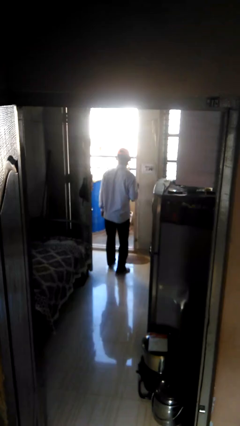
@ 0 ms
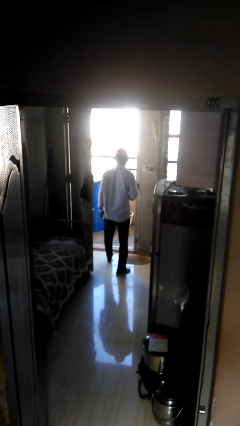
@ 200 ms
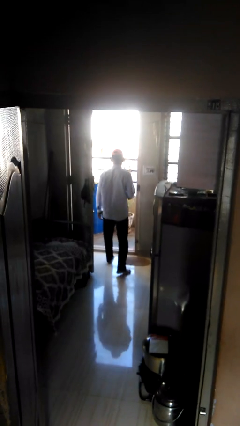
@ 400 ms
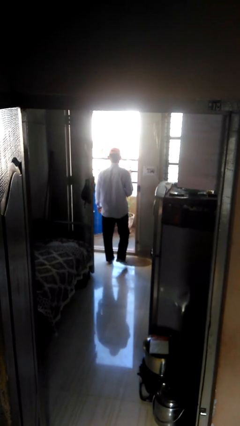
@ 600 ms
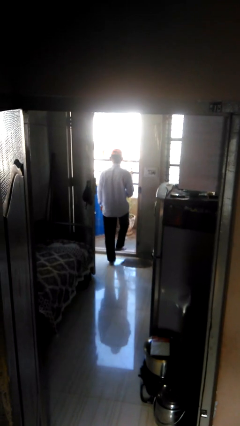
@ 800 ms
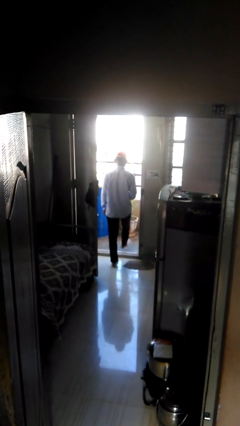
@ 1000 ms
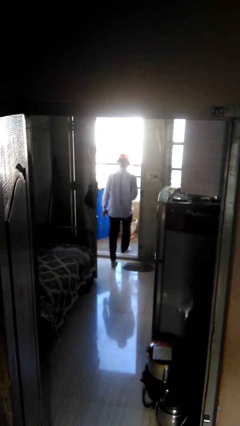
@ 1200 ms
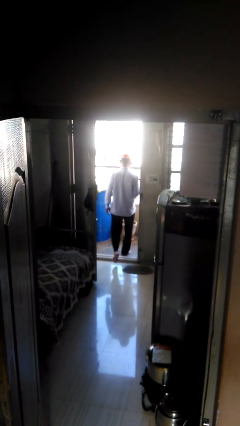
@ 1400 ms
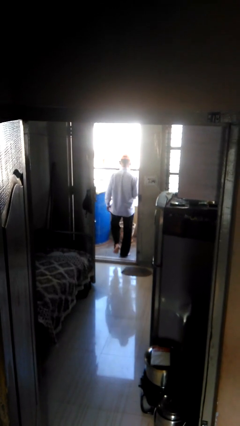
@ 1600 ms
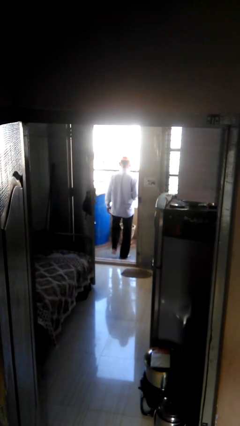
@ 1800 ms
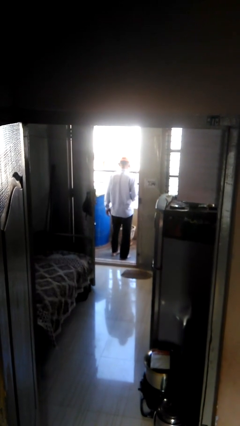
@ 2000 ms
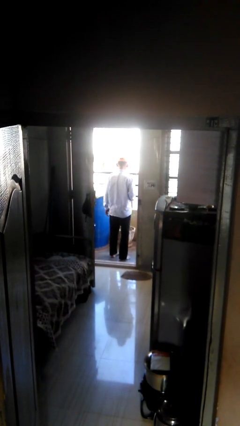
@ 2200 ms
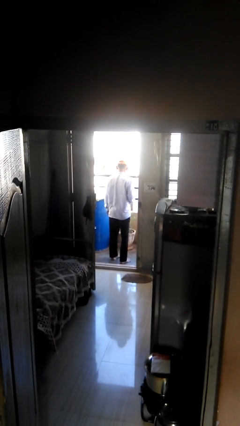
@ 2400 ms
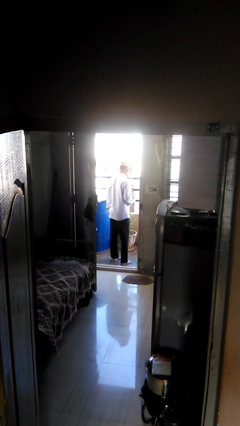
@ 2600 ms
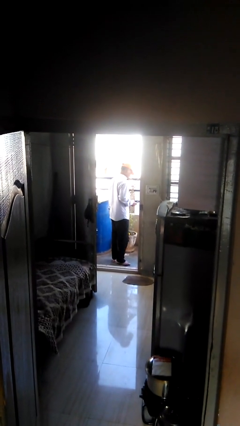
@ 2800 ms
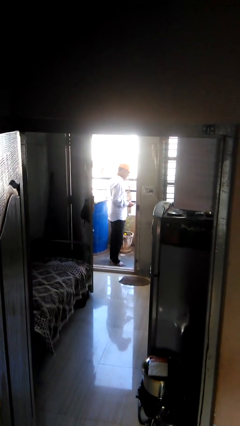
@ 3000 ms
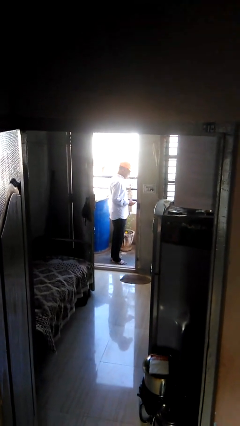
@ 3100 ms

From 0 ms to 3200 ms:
person exits scene through structure

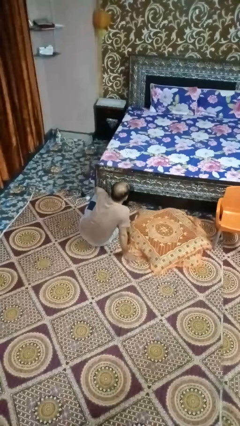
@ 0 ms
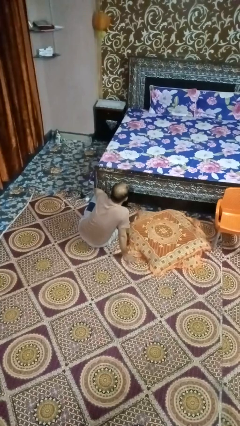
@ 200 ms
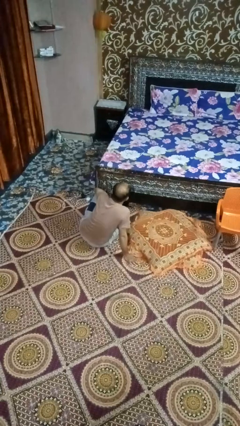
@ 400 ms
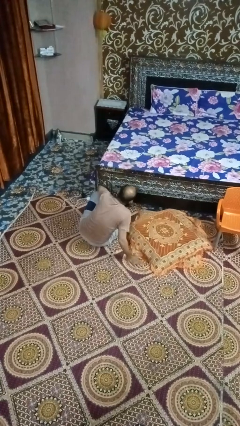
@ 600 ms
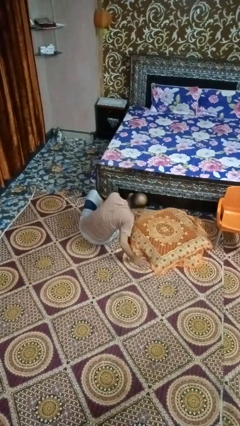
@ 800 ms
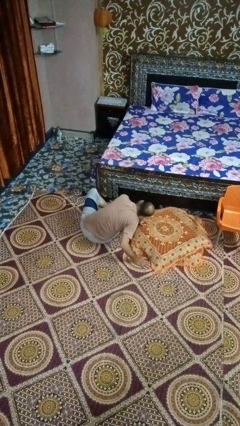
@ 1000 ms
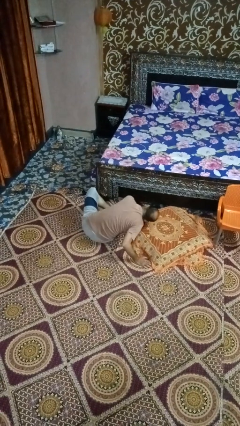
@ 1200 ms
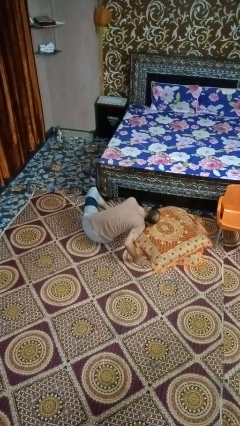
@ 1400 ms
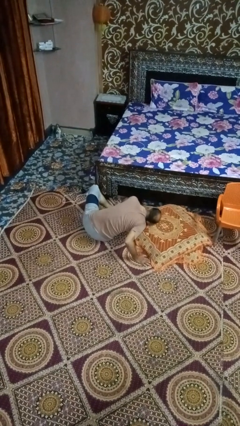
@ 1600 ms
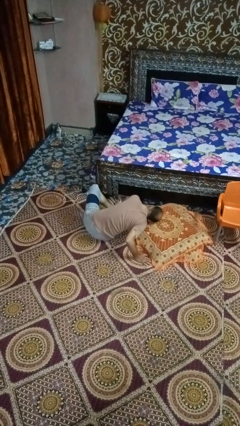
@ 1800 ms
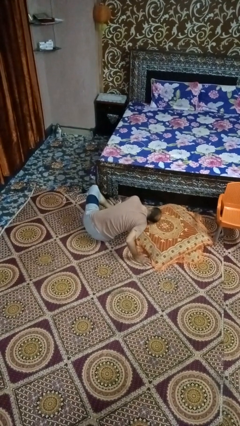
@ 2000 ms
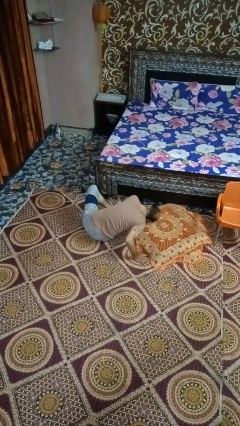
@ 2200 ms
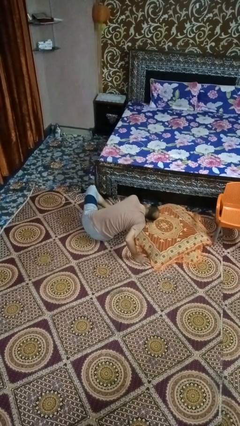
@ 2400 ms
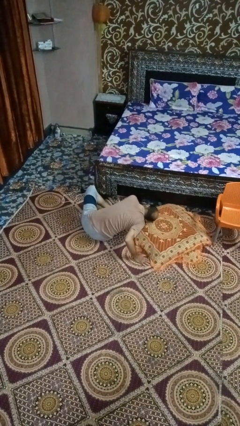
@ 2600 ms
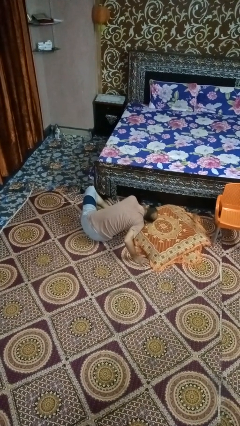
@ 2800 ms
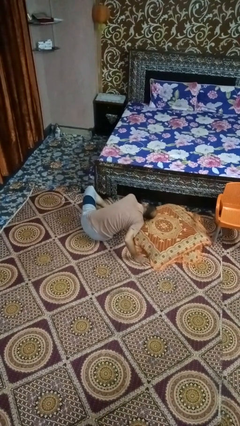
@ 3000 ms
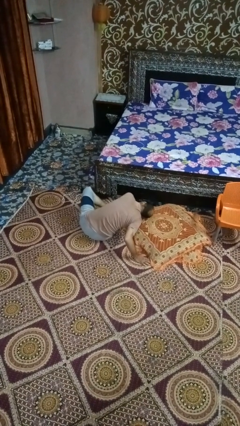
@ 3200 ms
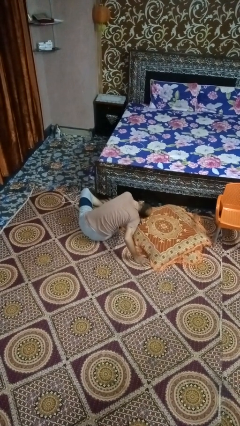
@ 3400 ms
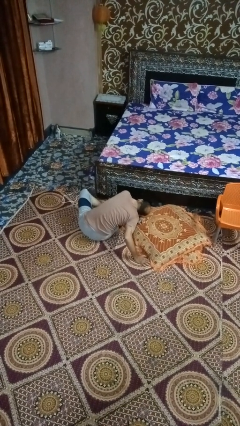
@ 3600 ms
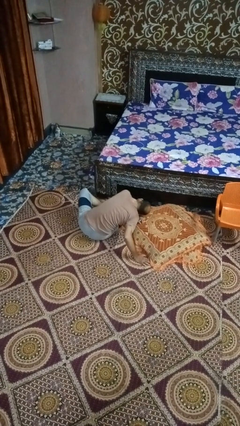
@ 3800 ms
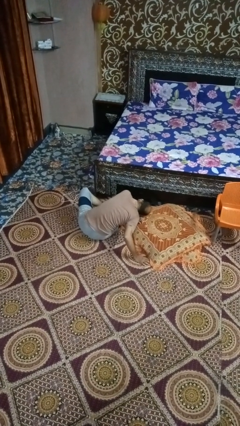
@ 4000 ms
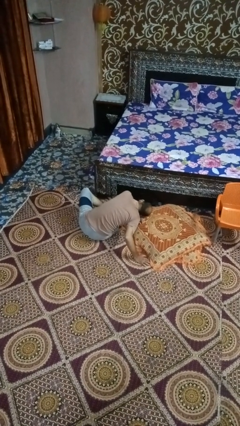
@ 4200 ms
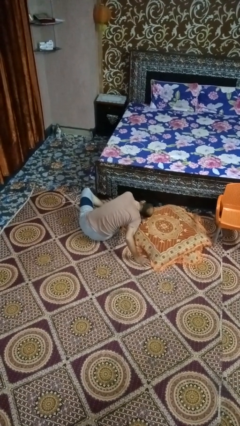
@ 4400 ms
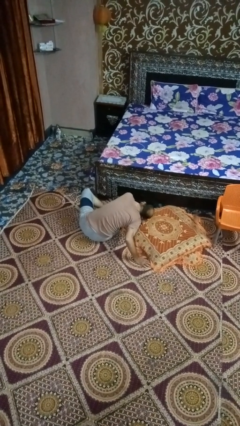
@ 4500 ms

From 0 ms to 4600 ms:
person searches under bed

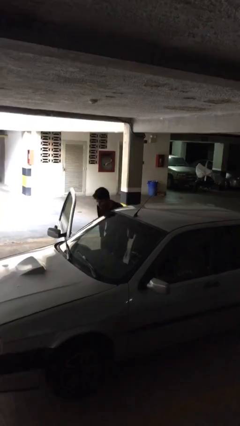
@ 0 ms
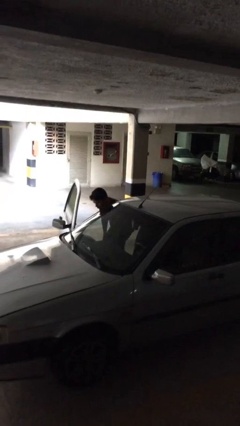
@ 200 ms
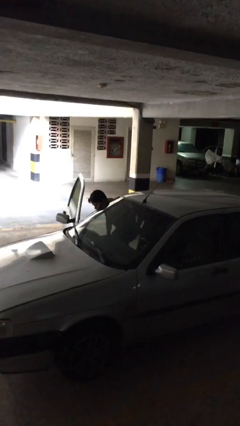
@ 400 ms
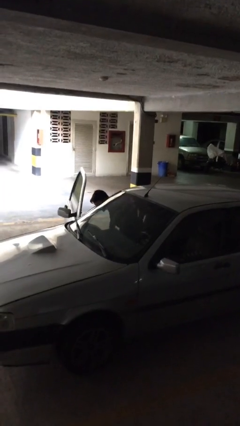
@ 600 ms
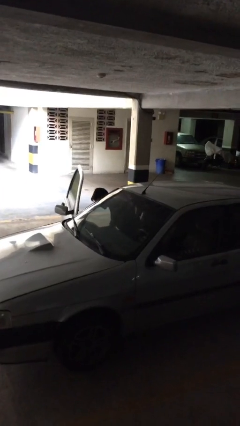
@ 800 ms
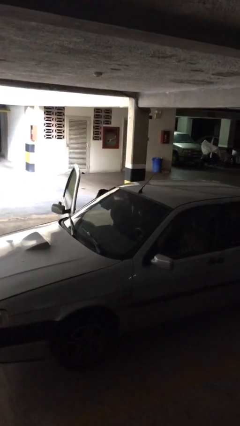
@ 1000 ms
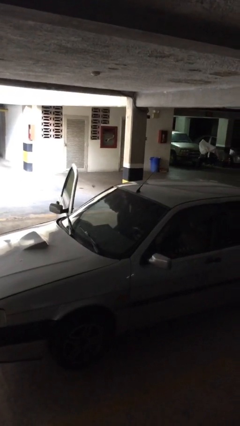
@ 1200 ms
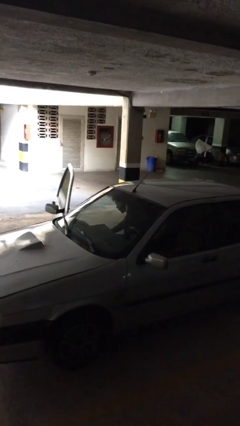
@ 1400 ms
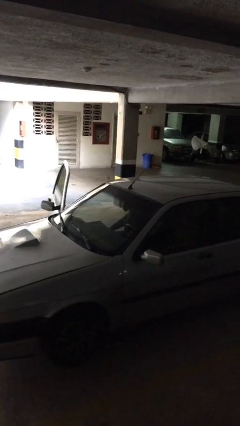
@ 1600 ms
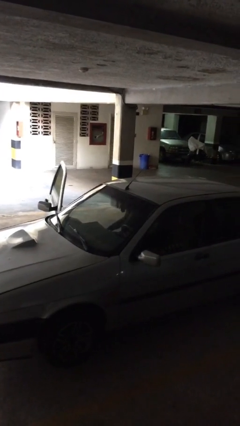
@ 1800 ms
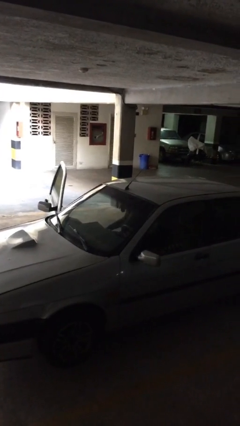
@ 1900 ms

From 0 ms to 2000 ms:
person enters car

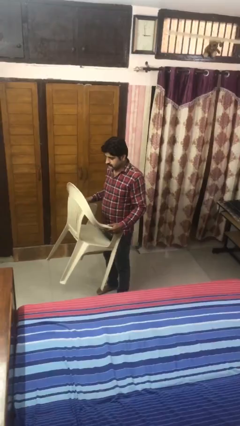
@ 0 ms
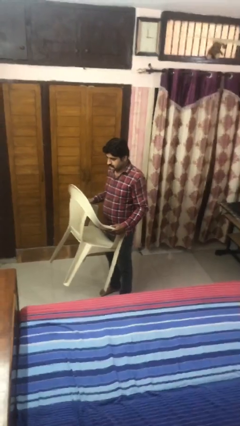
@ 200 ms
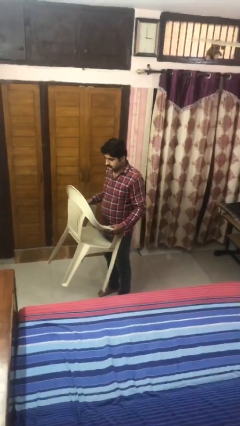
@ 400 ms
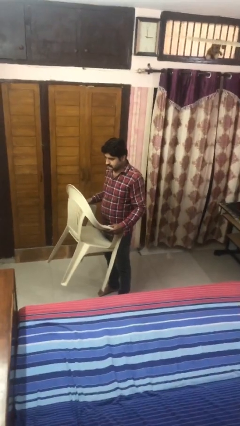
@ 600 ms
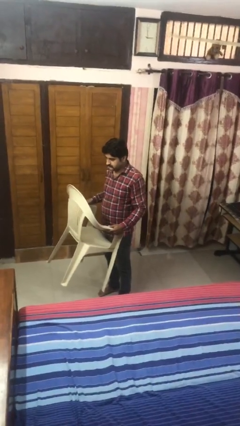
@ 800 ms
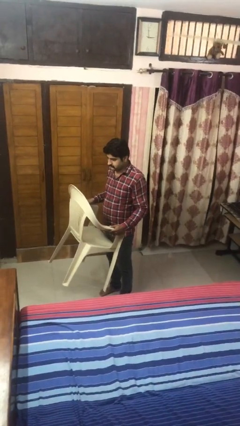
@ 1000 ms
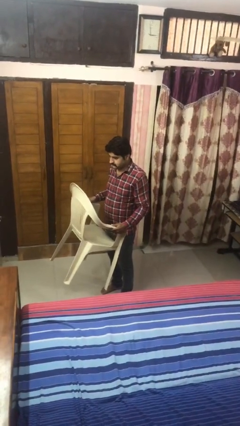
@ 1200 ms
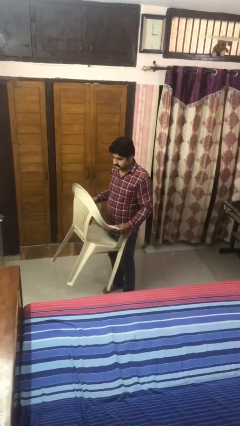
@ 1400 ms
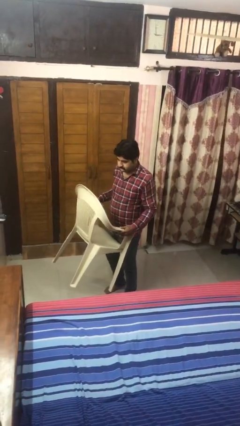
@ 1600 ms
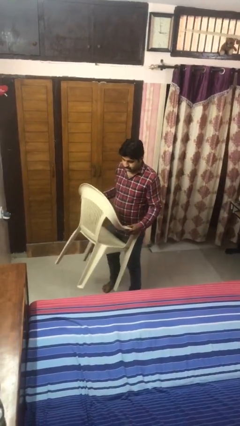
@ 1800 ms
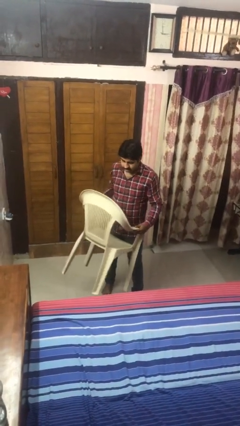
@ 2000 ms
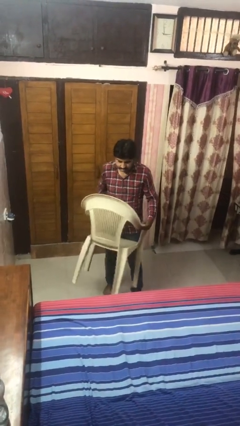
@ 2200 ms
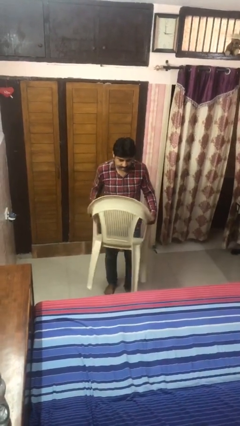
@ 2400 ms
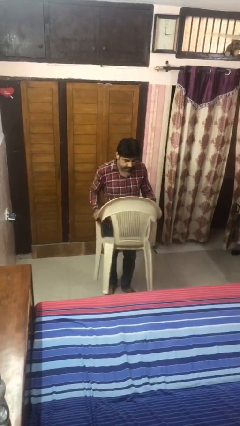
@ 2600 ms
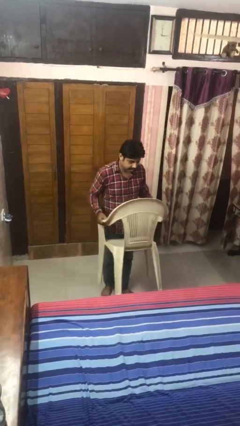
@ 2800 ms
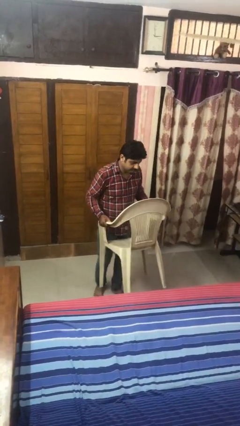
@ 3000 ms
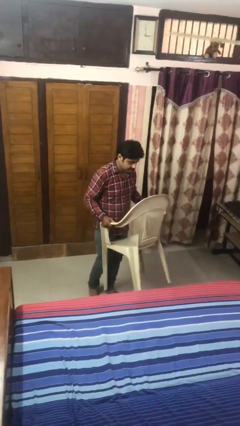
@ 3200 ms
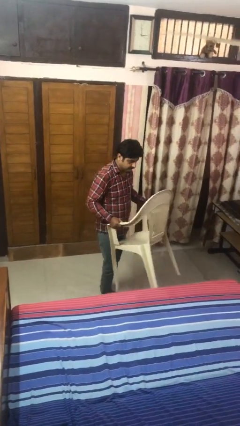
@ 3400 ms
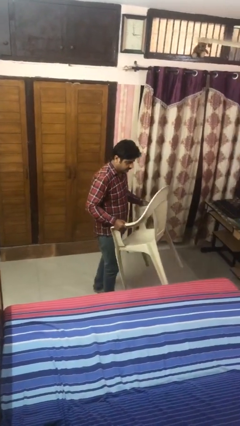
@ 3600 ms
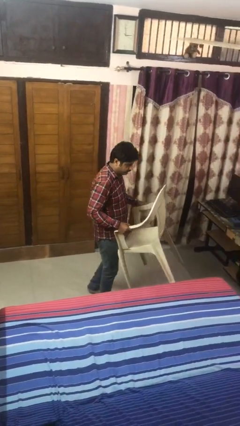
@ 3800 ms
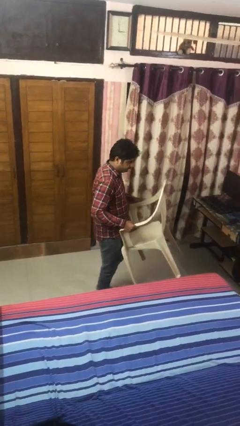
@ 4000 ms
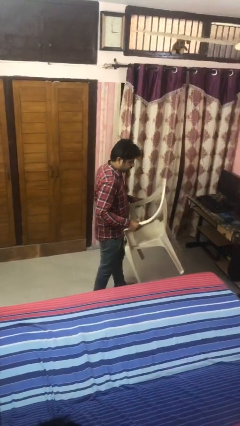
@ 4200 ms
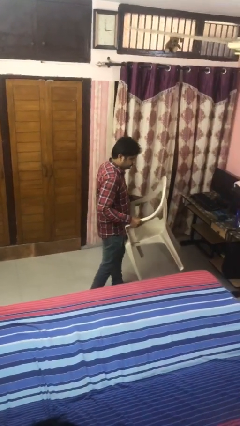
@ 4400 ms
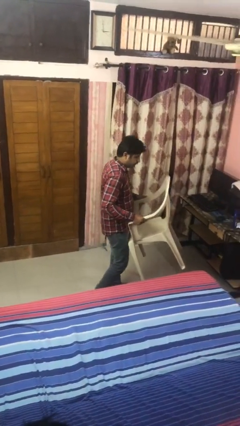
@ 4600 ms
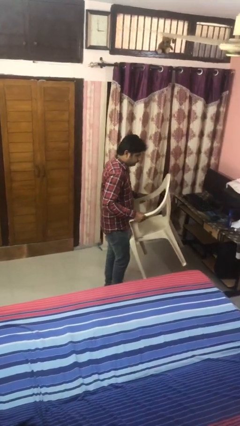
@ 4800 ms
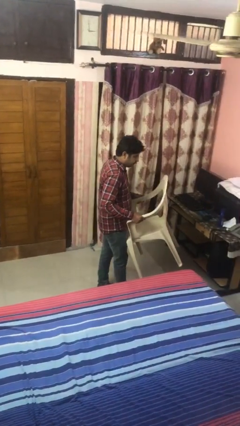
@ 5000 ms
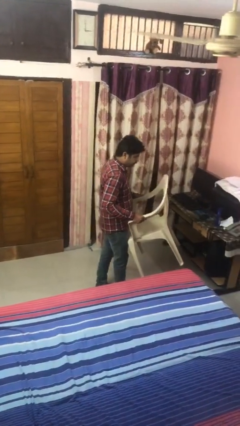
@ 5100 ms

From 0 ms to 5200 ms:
person carries furniture

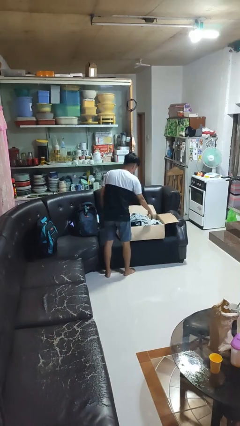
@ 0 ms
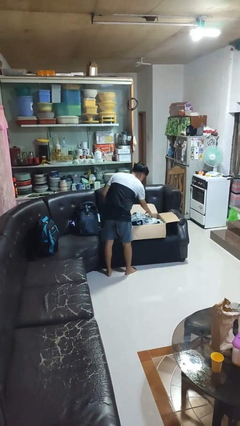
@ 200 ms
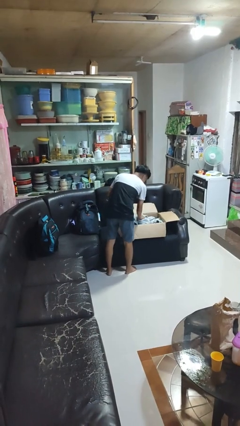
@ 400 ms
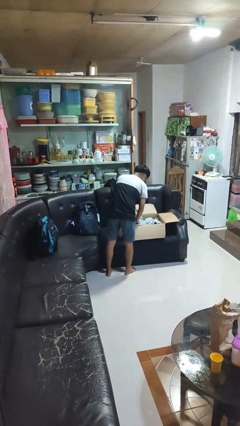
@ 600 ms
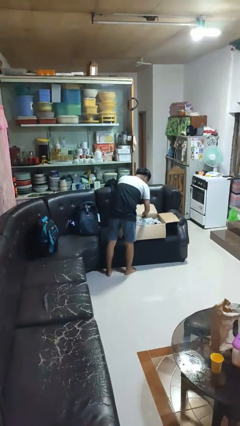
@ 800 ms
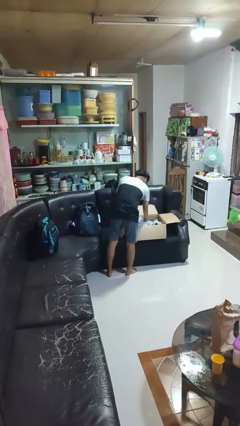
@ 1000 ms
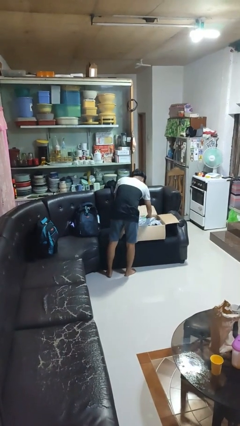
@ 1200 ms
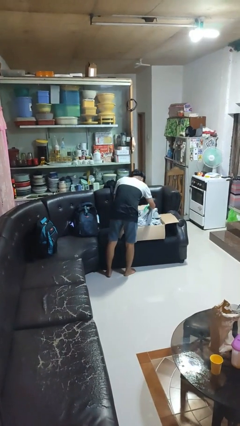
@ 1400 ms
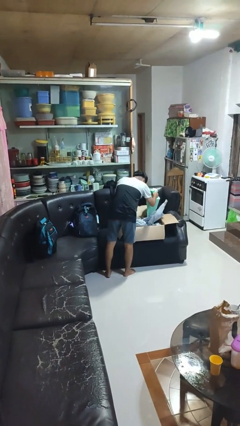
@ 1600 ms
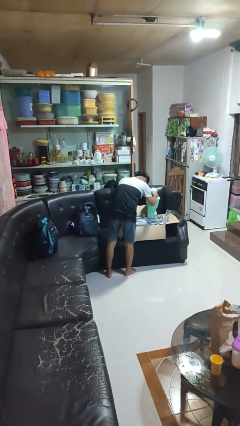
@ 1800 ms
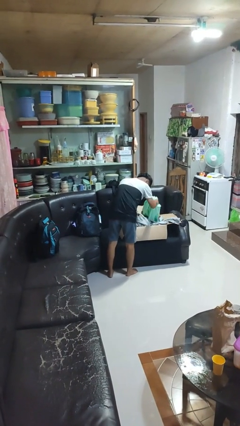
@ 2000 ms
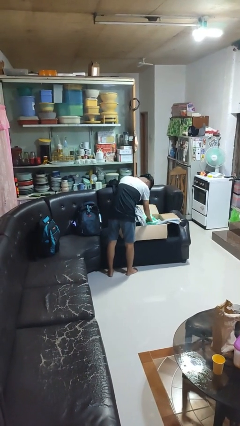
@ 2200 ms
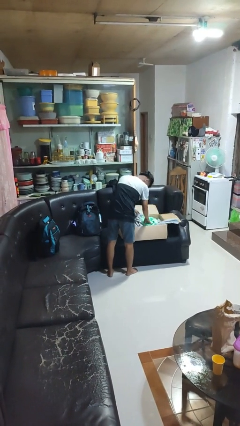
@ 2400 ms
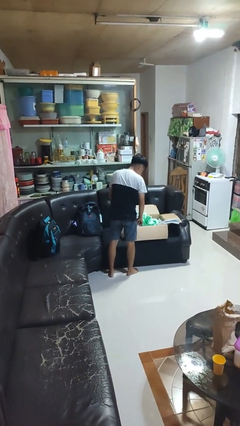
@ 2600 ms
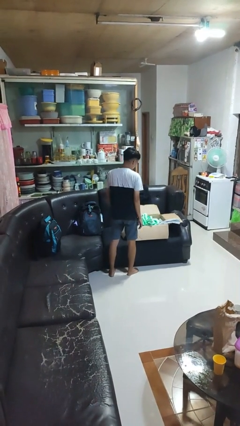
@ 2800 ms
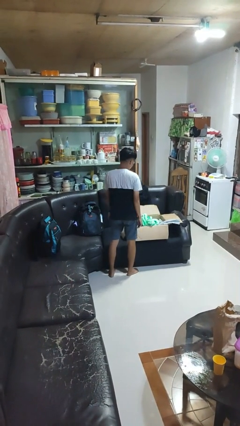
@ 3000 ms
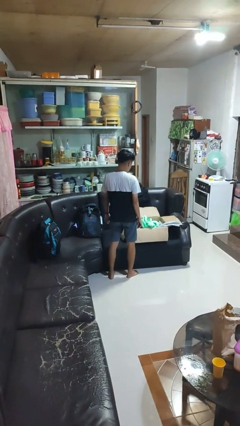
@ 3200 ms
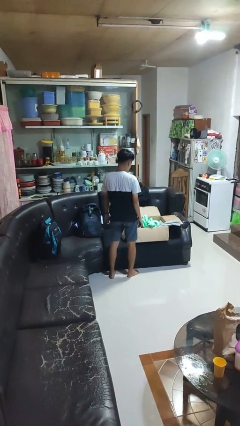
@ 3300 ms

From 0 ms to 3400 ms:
person searches in box
